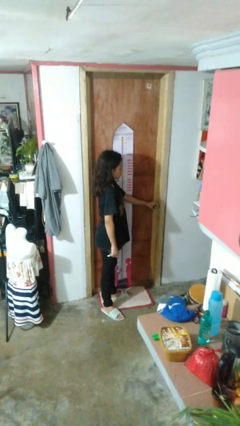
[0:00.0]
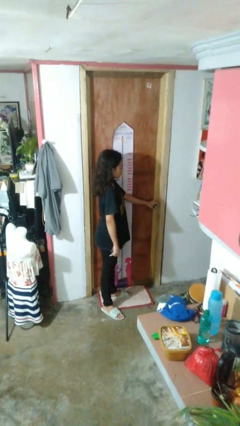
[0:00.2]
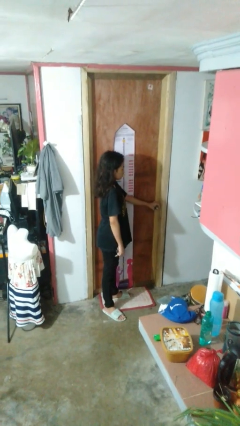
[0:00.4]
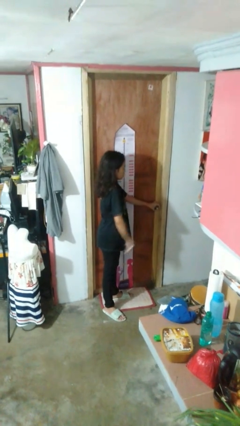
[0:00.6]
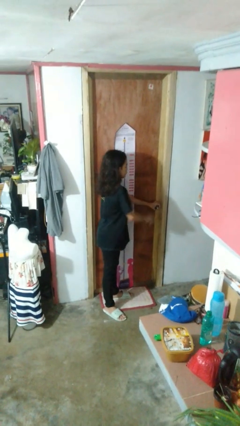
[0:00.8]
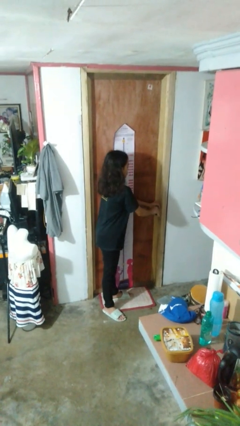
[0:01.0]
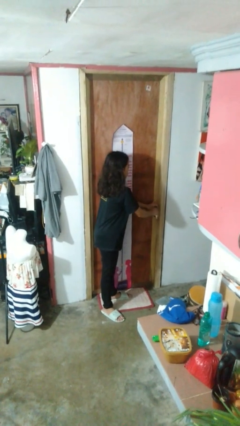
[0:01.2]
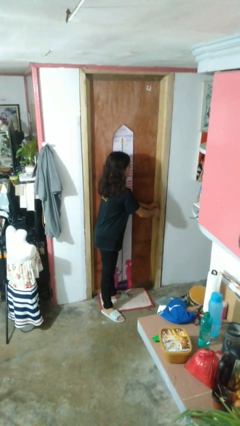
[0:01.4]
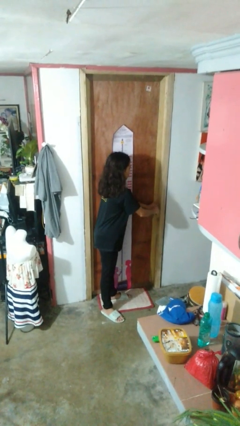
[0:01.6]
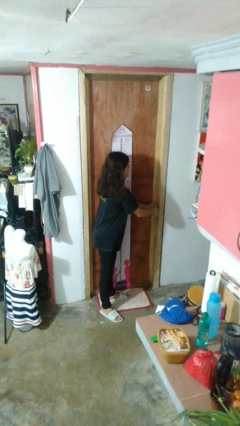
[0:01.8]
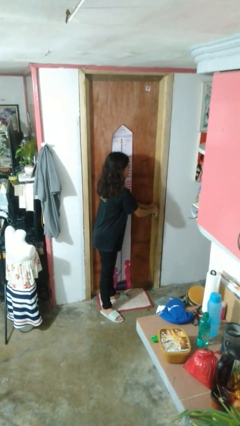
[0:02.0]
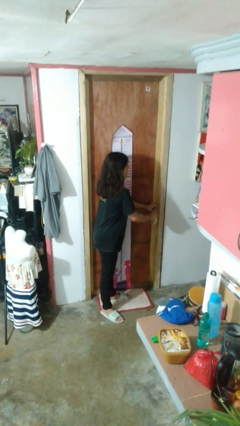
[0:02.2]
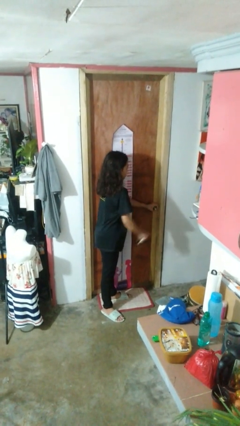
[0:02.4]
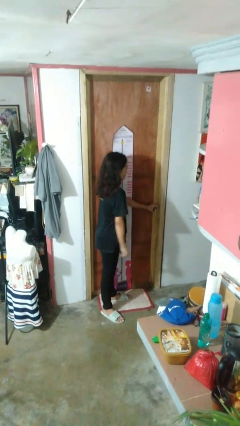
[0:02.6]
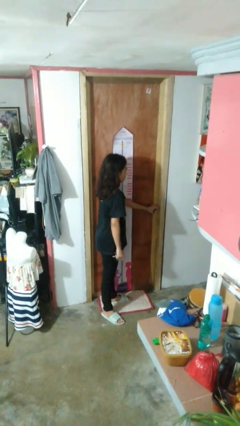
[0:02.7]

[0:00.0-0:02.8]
person unlocks door with keys

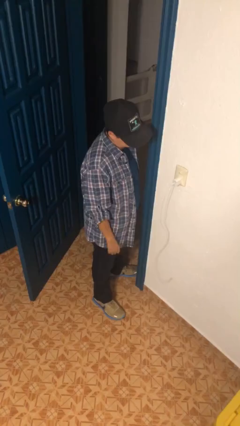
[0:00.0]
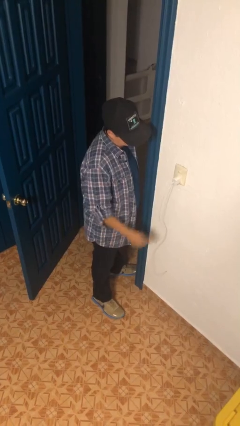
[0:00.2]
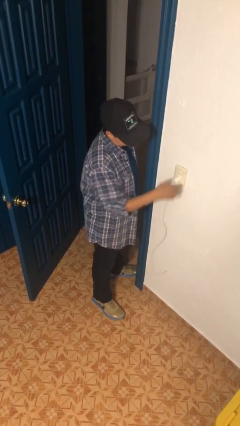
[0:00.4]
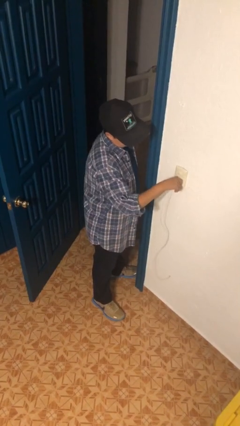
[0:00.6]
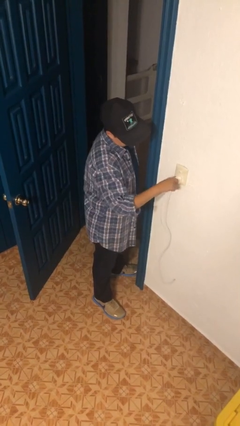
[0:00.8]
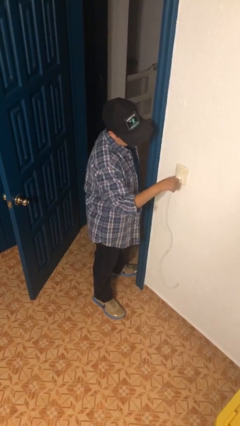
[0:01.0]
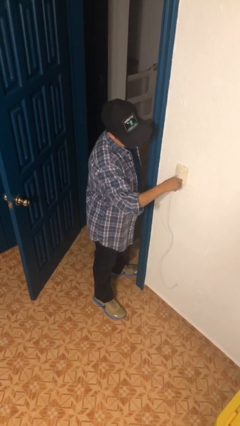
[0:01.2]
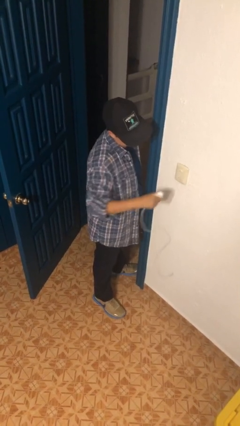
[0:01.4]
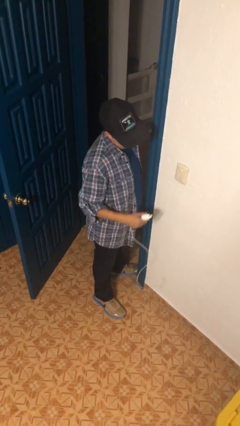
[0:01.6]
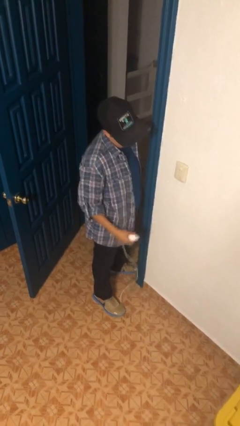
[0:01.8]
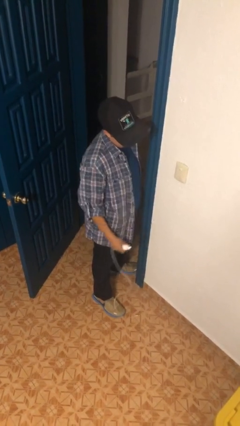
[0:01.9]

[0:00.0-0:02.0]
person unplugs from electrical socket

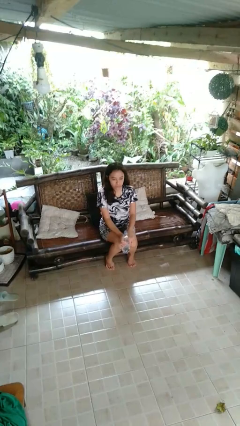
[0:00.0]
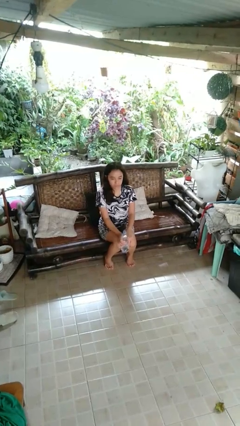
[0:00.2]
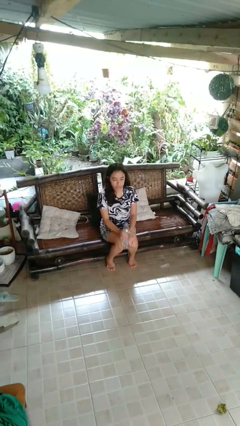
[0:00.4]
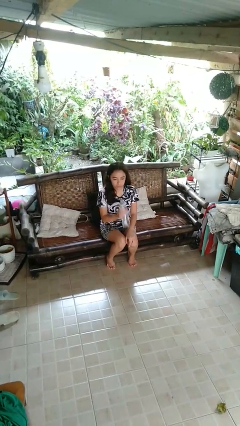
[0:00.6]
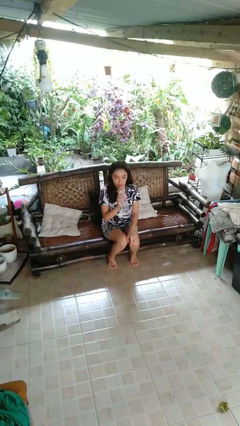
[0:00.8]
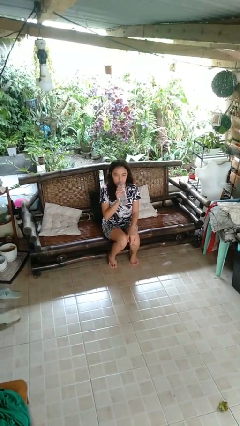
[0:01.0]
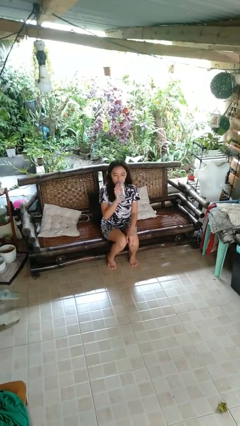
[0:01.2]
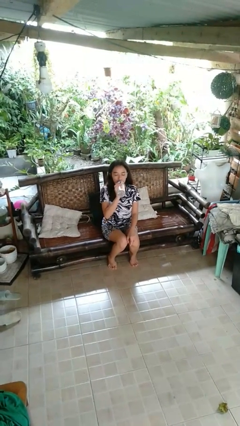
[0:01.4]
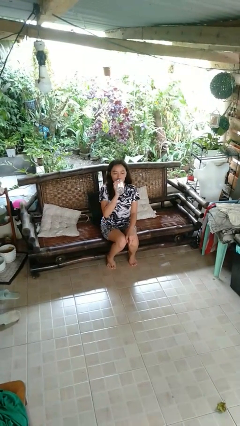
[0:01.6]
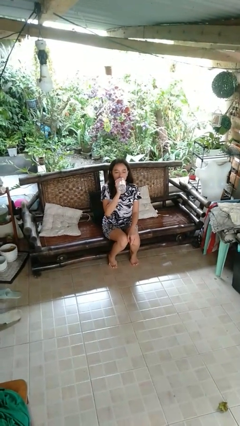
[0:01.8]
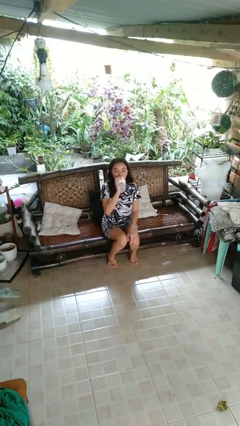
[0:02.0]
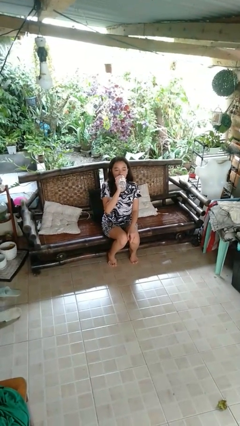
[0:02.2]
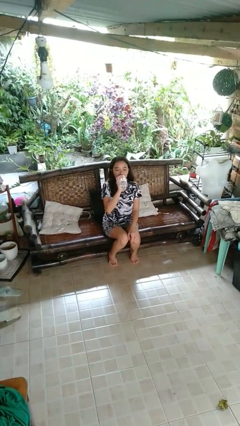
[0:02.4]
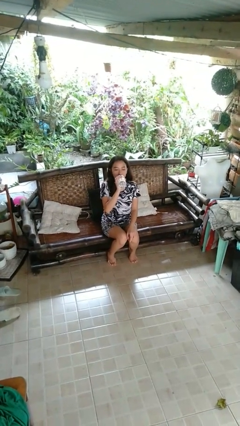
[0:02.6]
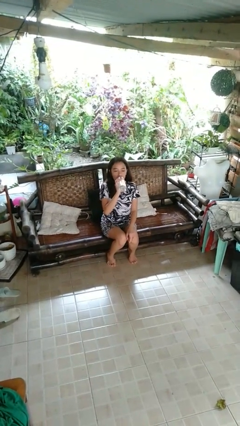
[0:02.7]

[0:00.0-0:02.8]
person drinks from bottle

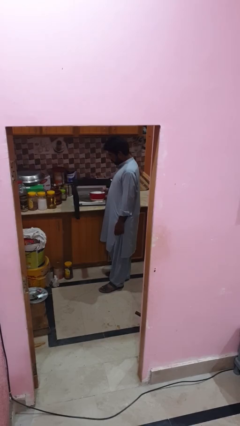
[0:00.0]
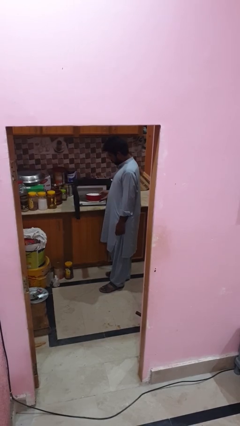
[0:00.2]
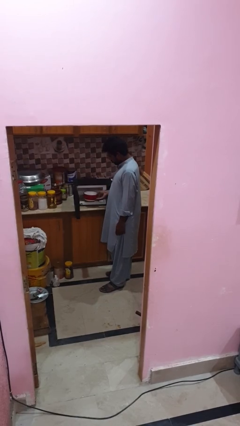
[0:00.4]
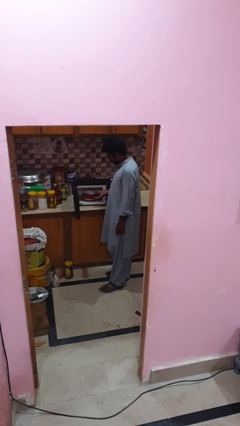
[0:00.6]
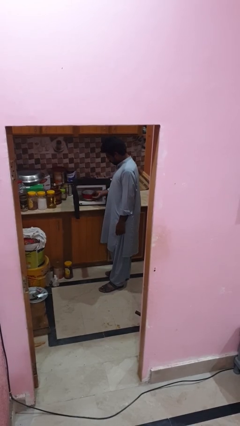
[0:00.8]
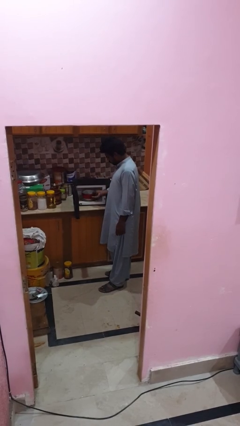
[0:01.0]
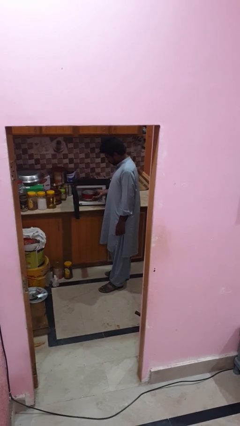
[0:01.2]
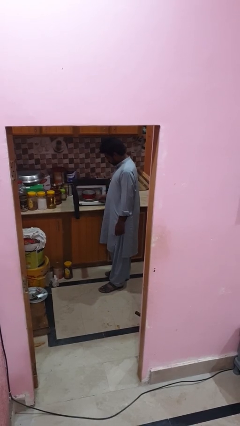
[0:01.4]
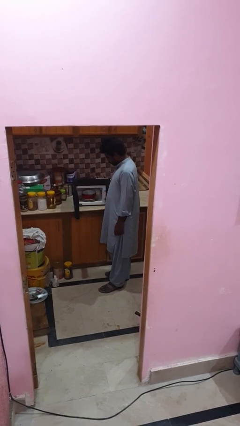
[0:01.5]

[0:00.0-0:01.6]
person puts object into microwave

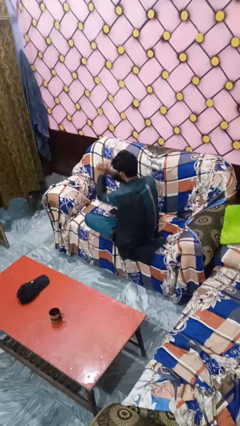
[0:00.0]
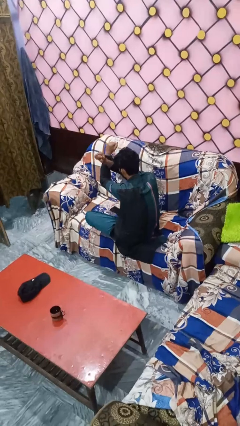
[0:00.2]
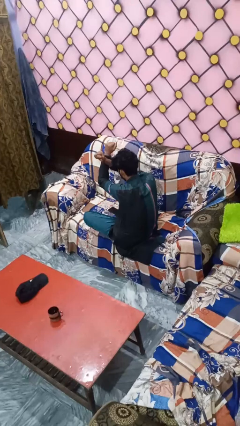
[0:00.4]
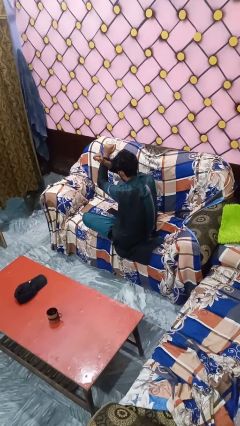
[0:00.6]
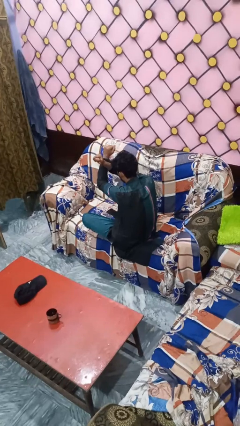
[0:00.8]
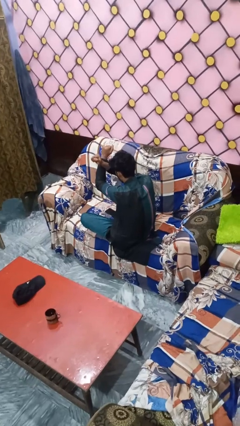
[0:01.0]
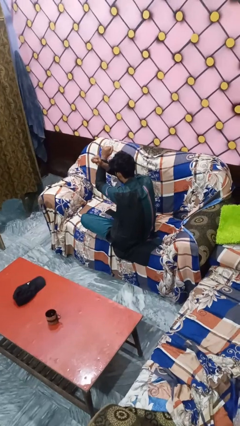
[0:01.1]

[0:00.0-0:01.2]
person gestures arms x

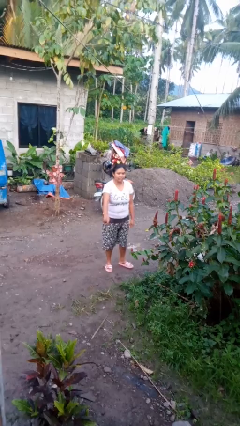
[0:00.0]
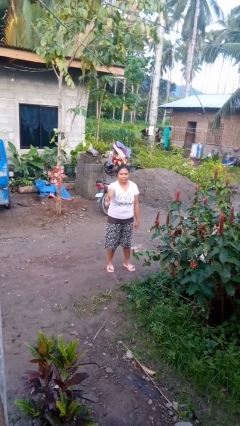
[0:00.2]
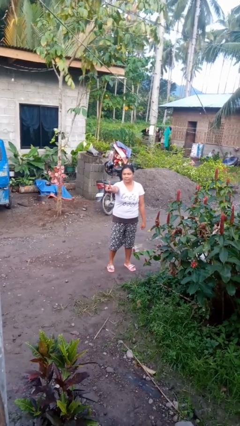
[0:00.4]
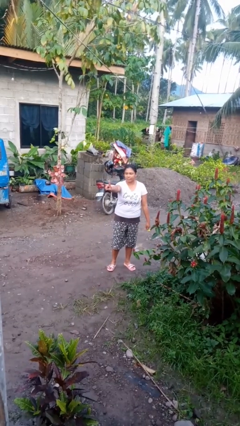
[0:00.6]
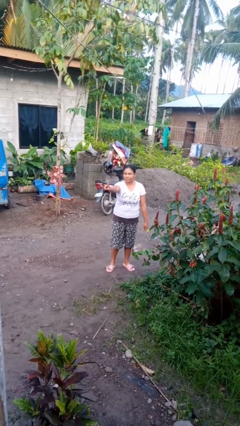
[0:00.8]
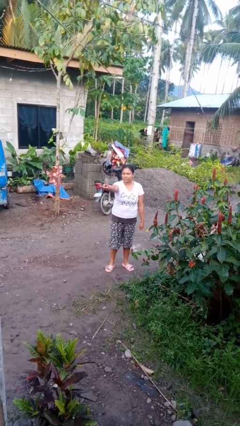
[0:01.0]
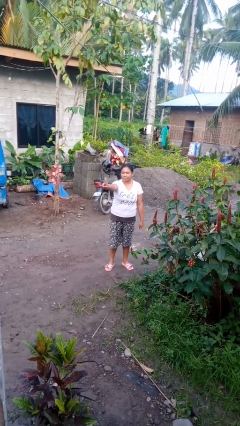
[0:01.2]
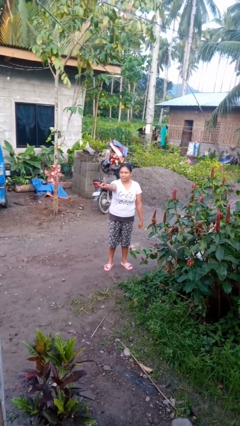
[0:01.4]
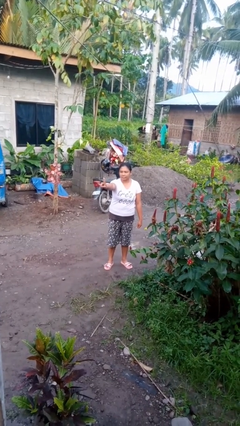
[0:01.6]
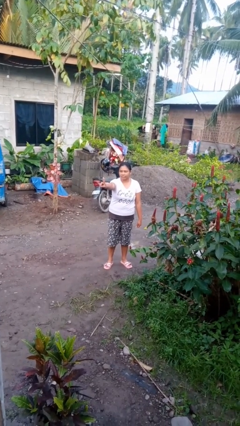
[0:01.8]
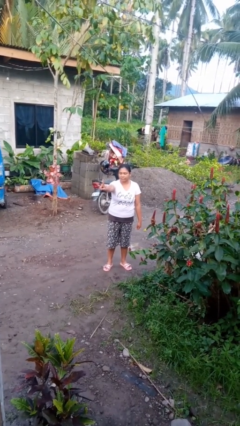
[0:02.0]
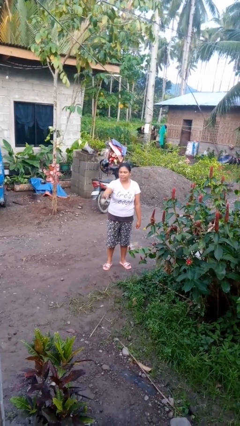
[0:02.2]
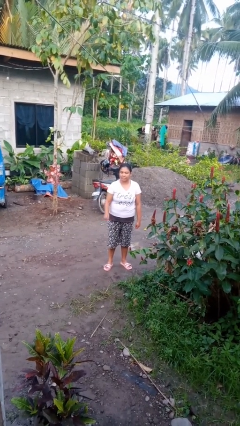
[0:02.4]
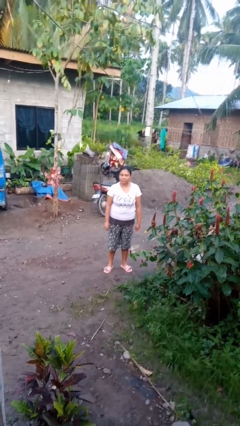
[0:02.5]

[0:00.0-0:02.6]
person gestures number one

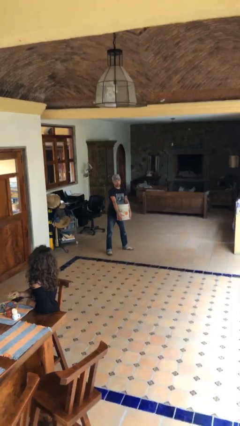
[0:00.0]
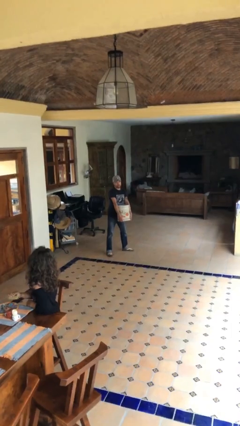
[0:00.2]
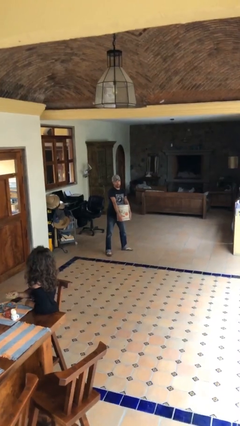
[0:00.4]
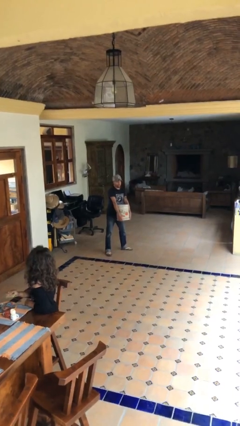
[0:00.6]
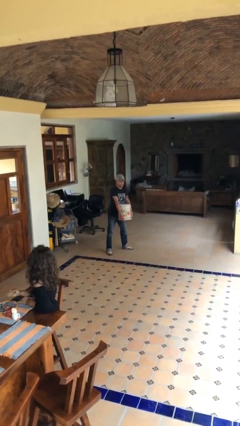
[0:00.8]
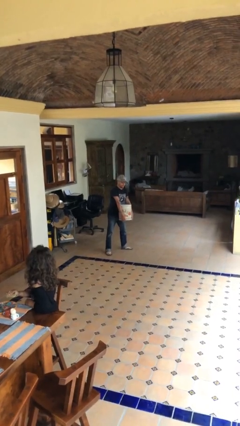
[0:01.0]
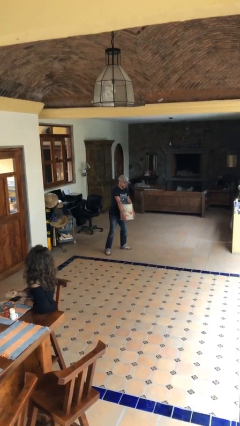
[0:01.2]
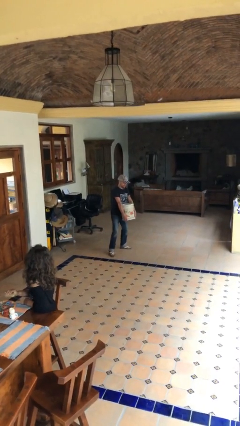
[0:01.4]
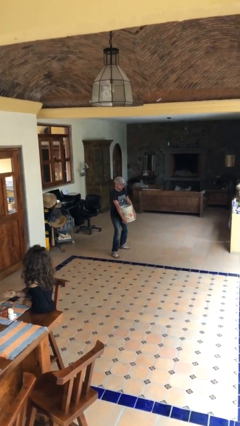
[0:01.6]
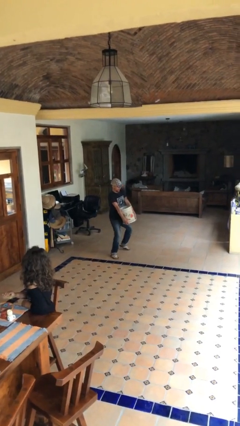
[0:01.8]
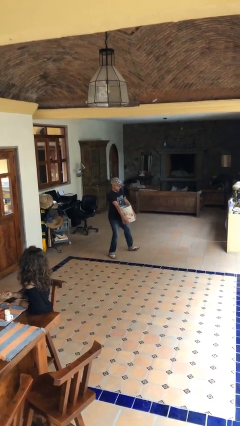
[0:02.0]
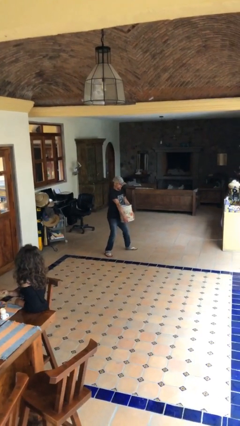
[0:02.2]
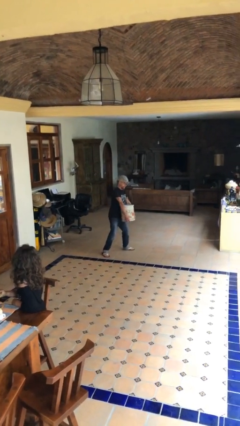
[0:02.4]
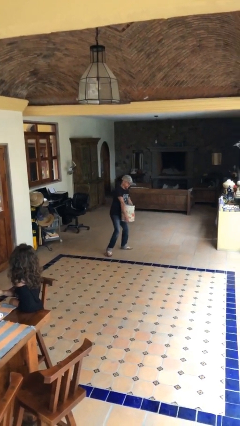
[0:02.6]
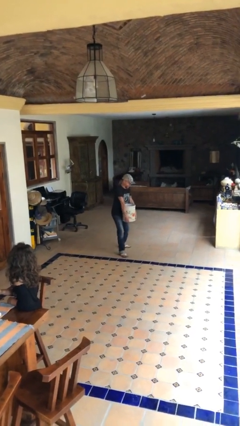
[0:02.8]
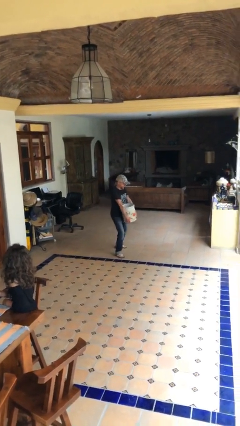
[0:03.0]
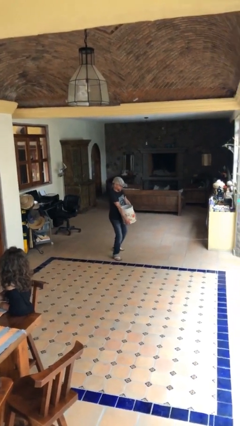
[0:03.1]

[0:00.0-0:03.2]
person carries heavy object

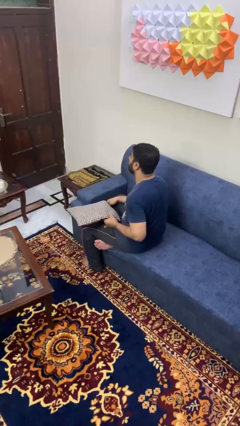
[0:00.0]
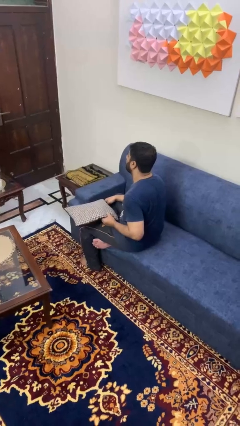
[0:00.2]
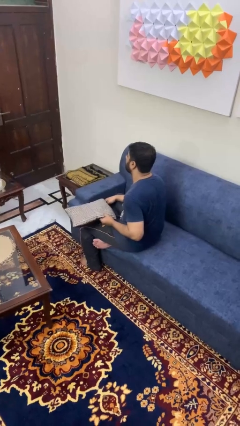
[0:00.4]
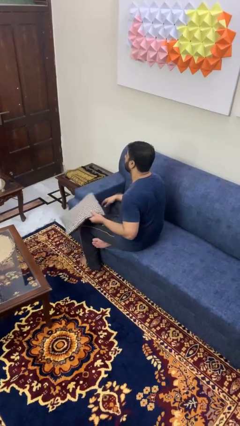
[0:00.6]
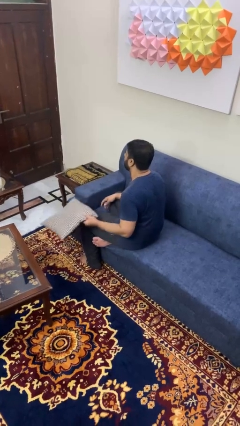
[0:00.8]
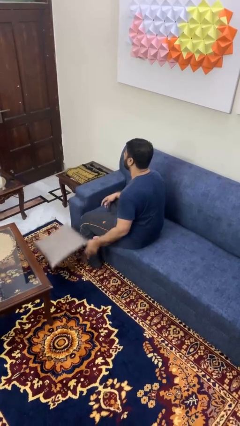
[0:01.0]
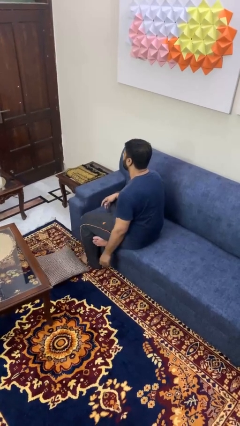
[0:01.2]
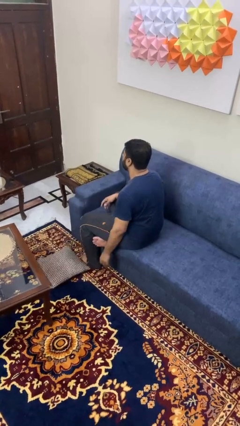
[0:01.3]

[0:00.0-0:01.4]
person throws object to ground
